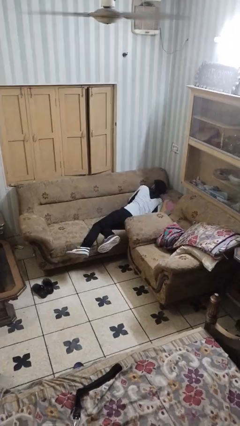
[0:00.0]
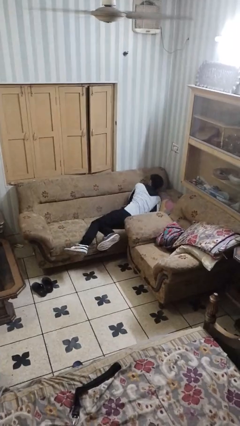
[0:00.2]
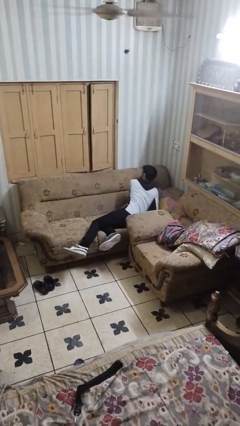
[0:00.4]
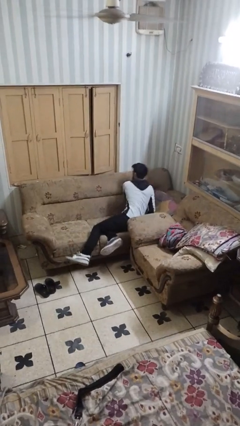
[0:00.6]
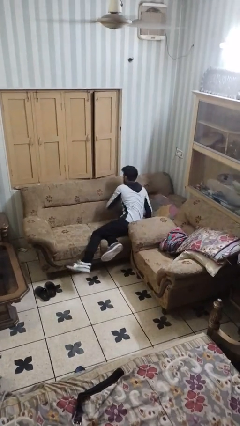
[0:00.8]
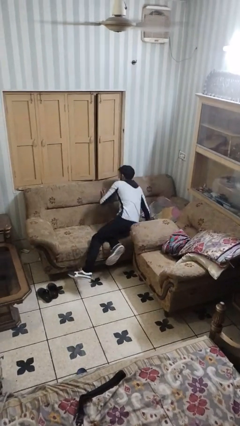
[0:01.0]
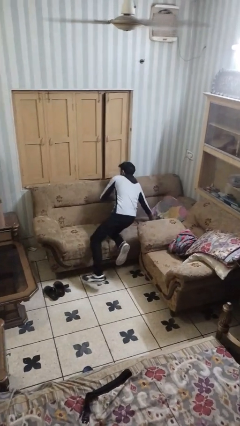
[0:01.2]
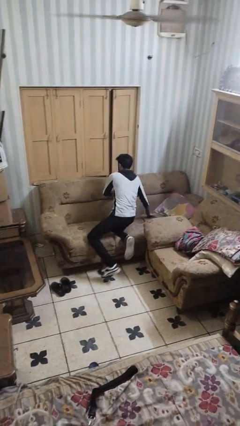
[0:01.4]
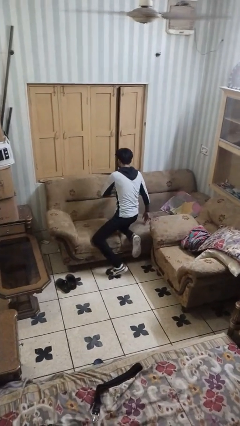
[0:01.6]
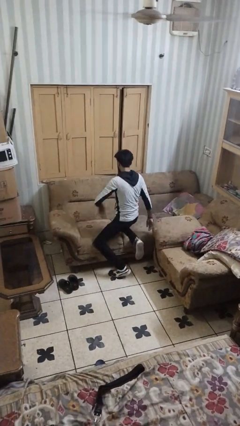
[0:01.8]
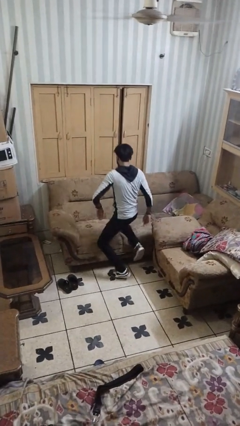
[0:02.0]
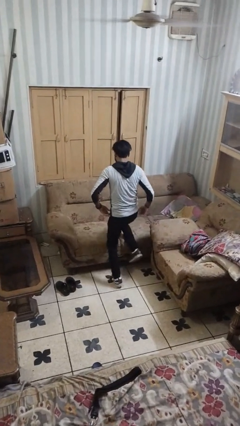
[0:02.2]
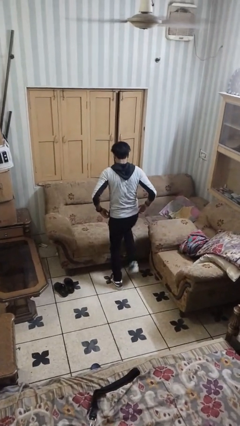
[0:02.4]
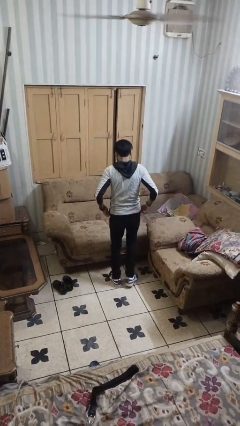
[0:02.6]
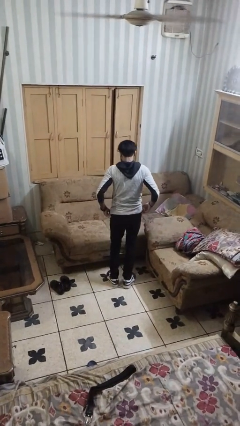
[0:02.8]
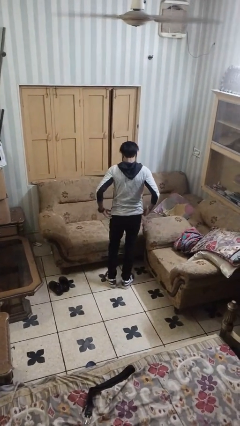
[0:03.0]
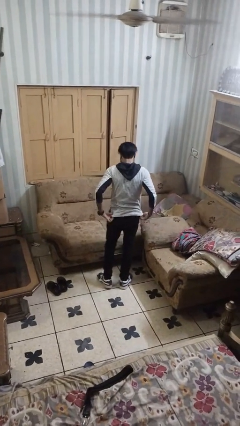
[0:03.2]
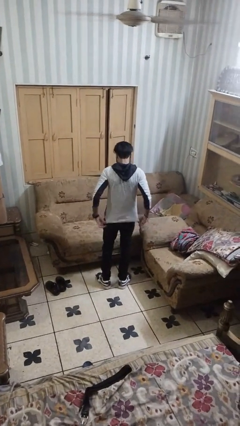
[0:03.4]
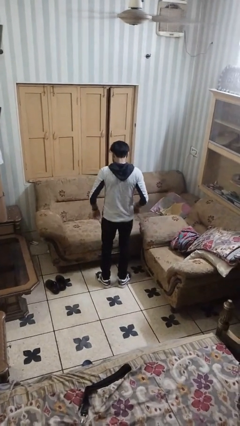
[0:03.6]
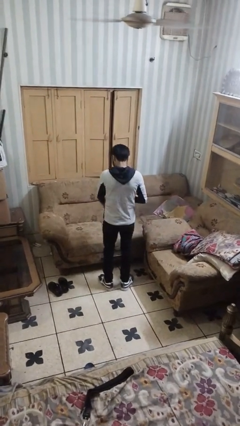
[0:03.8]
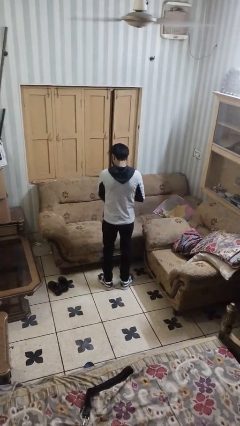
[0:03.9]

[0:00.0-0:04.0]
person stands up

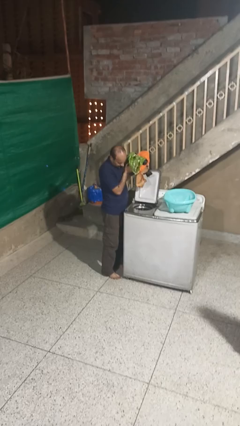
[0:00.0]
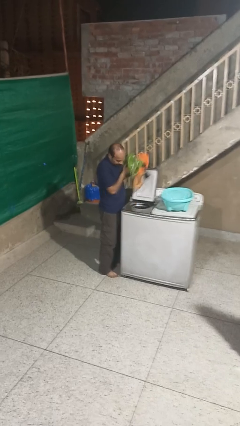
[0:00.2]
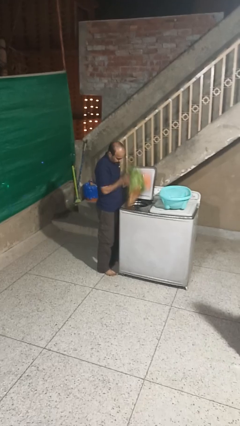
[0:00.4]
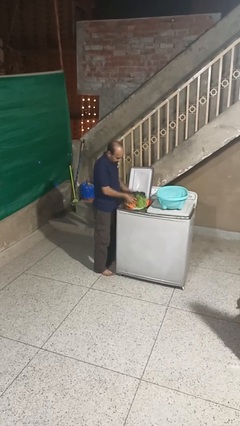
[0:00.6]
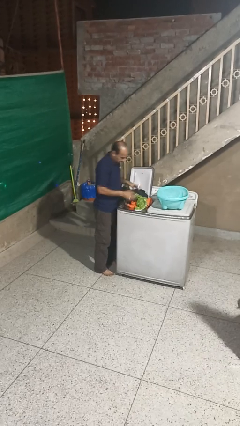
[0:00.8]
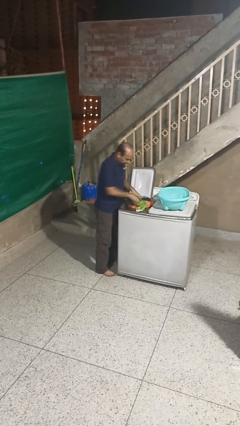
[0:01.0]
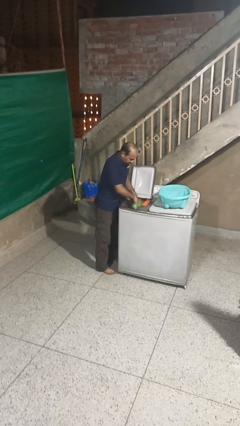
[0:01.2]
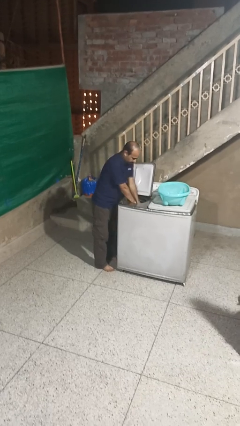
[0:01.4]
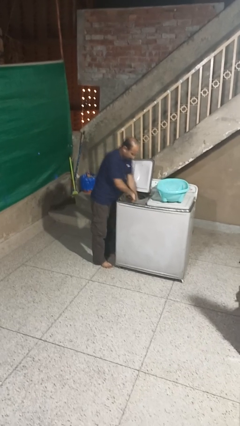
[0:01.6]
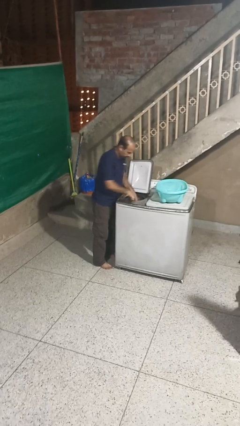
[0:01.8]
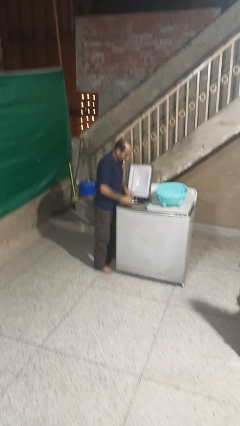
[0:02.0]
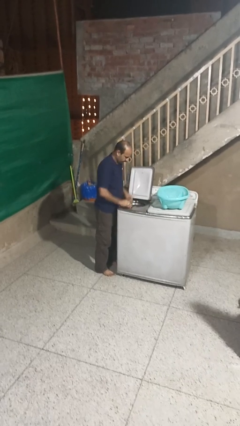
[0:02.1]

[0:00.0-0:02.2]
person loads dryer

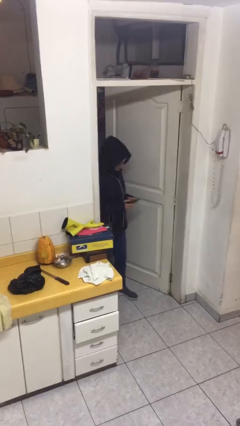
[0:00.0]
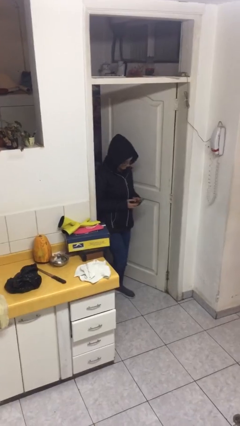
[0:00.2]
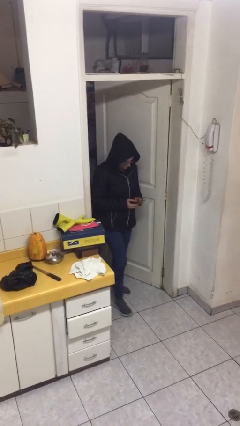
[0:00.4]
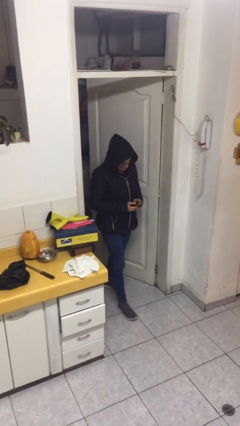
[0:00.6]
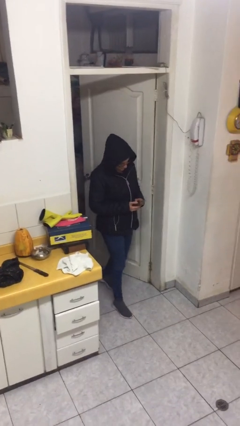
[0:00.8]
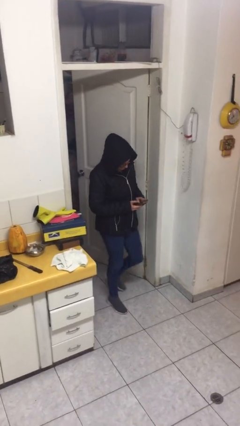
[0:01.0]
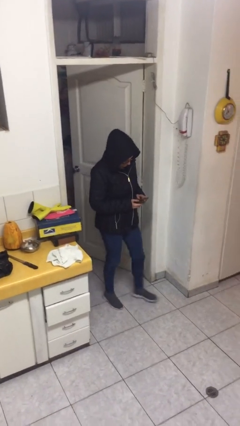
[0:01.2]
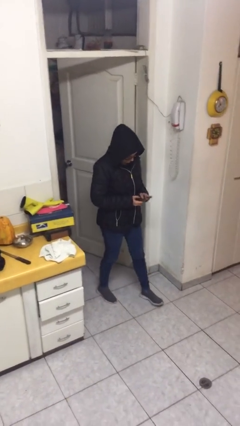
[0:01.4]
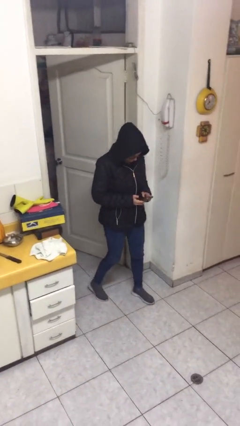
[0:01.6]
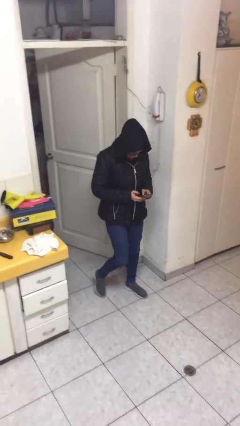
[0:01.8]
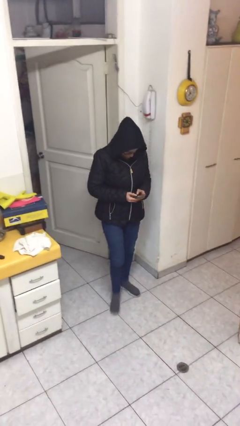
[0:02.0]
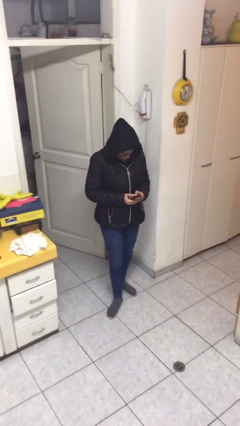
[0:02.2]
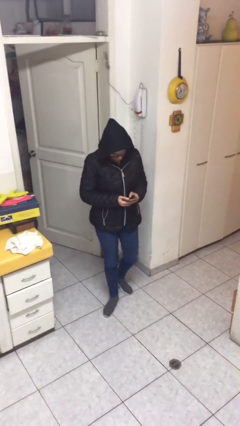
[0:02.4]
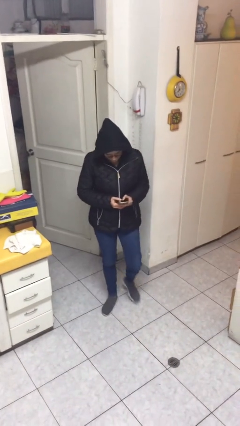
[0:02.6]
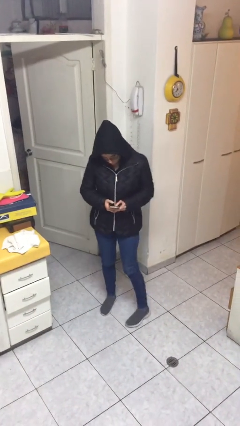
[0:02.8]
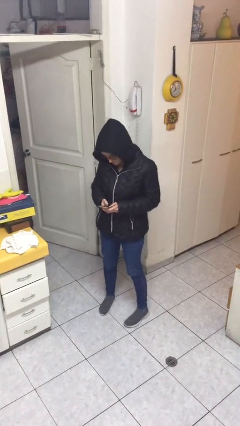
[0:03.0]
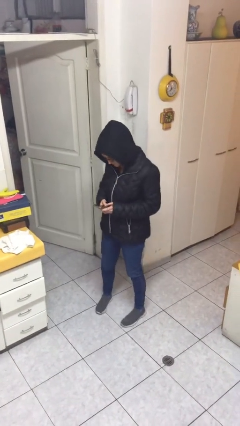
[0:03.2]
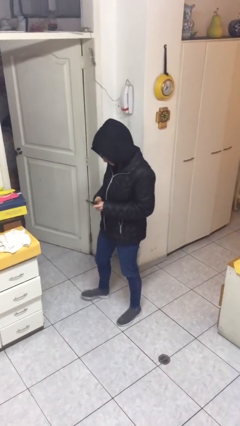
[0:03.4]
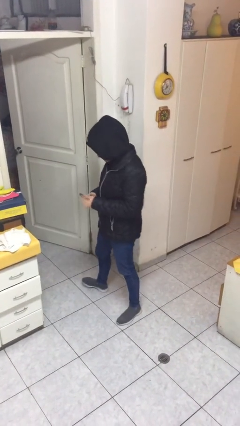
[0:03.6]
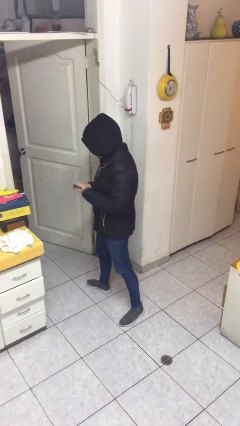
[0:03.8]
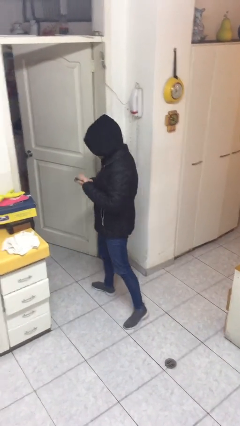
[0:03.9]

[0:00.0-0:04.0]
person enters scene through structure

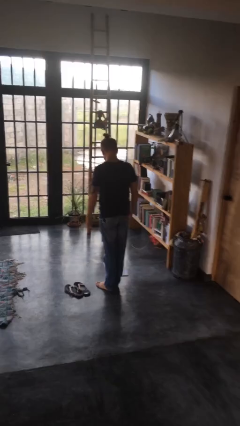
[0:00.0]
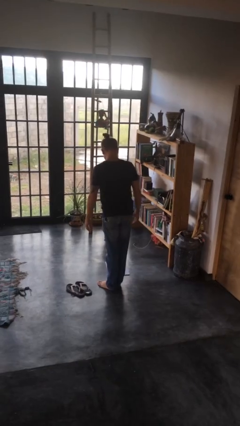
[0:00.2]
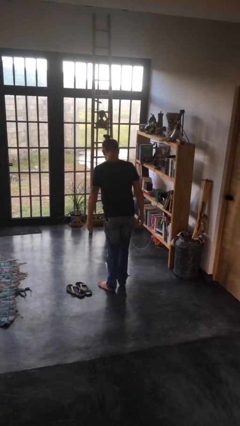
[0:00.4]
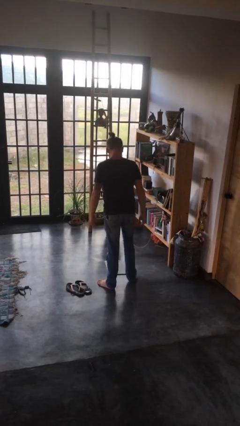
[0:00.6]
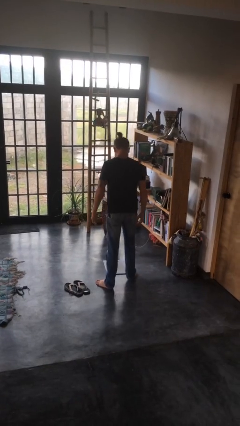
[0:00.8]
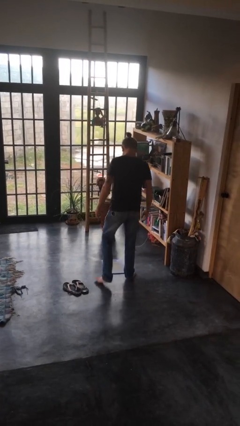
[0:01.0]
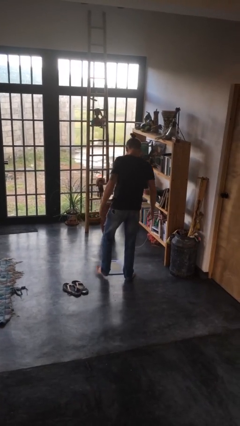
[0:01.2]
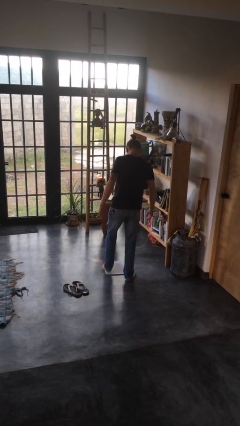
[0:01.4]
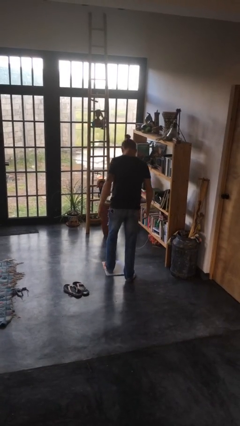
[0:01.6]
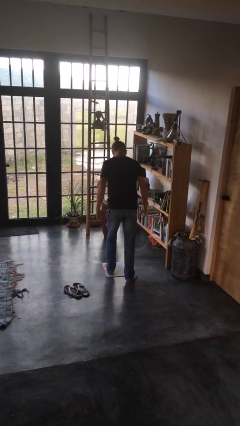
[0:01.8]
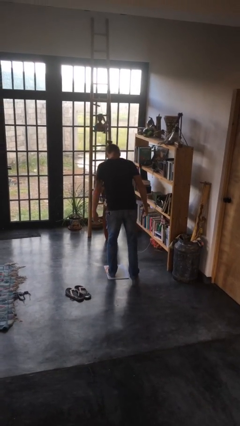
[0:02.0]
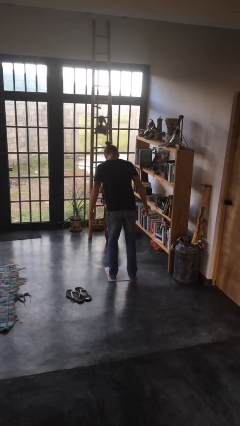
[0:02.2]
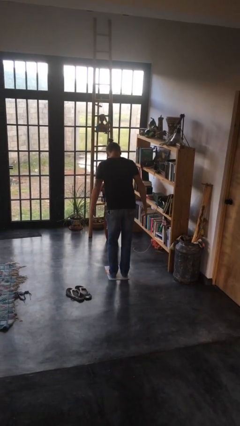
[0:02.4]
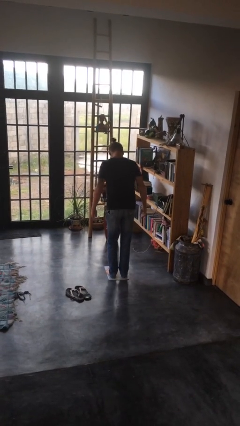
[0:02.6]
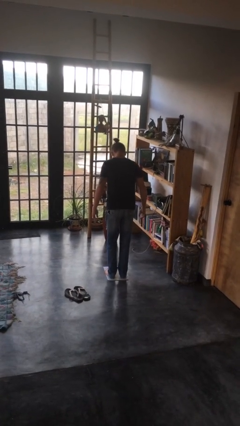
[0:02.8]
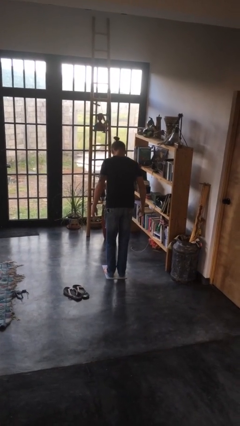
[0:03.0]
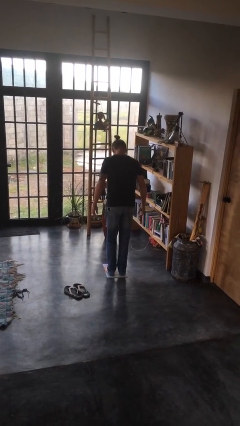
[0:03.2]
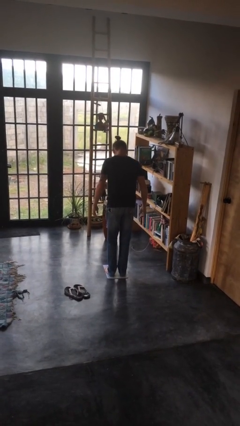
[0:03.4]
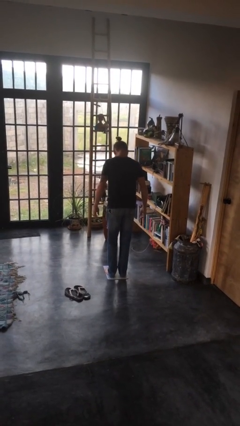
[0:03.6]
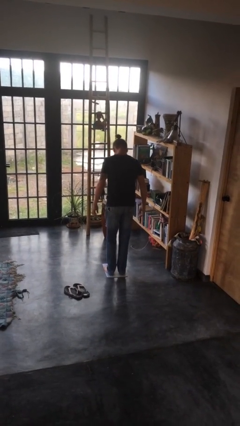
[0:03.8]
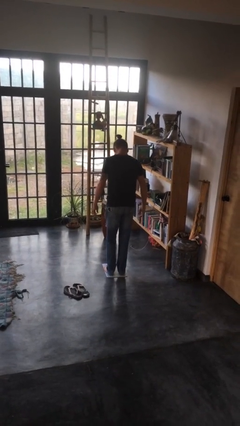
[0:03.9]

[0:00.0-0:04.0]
person uses bodyweight scale

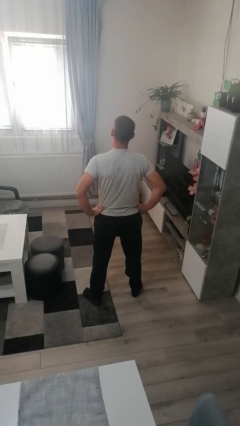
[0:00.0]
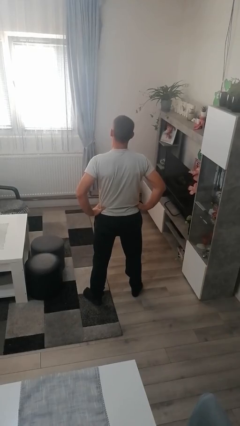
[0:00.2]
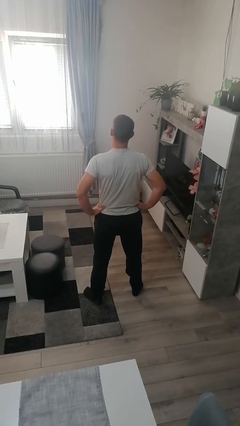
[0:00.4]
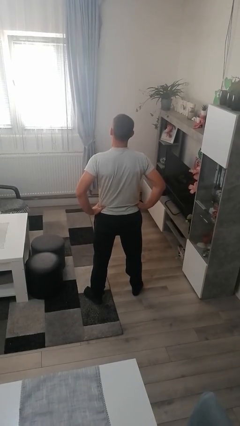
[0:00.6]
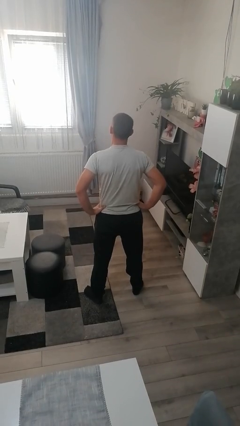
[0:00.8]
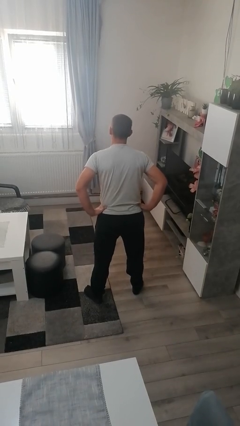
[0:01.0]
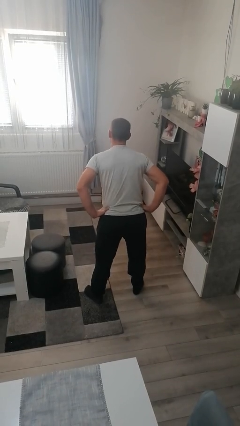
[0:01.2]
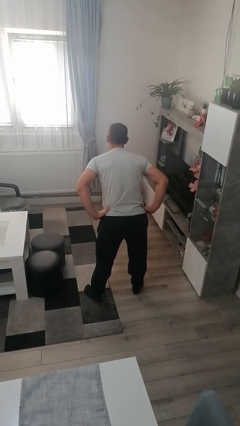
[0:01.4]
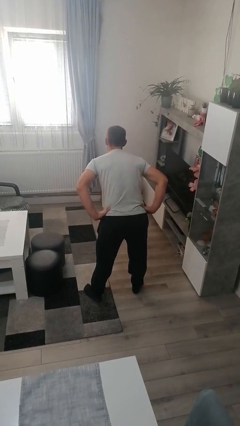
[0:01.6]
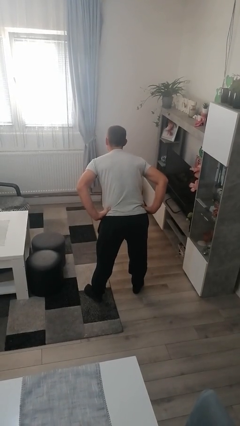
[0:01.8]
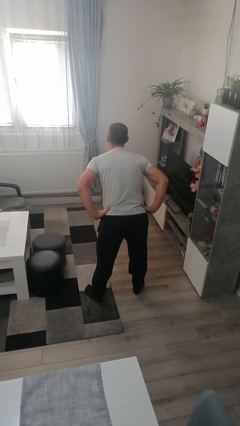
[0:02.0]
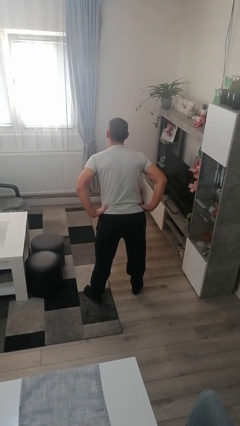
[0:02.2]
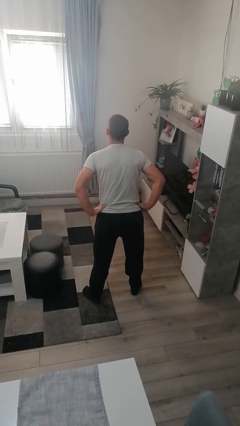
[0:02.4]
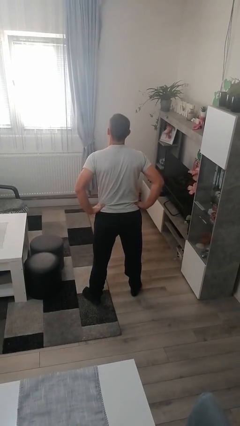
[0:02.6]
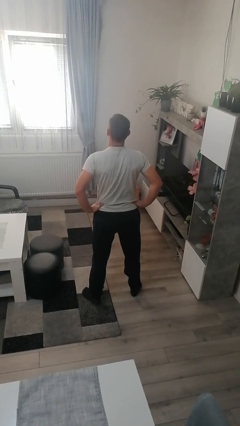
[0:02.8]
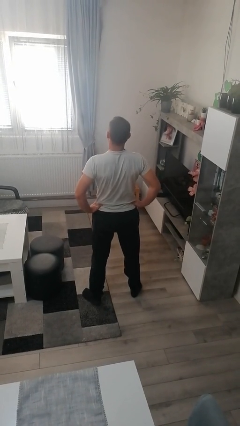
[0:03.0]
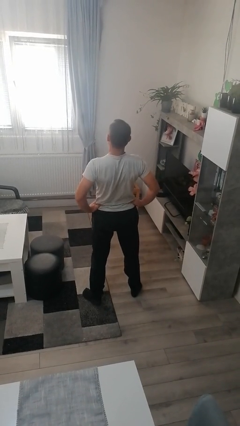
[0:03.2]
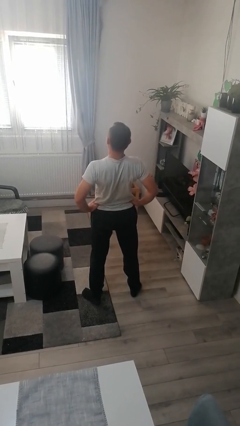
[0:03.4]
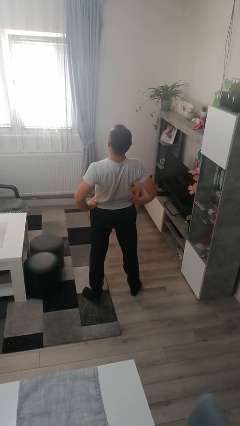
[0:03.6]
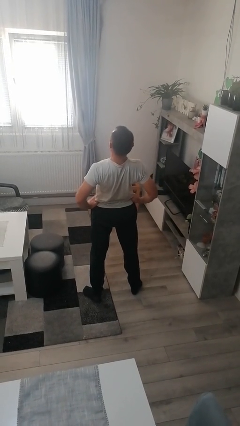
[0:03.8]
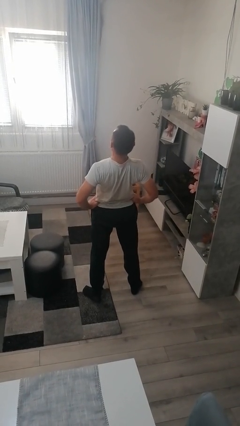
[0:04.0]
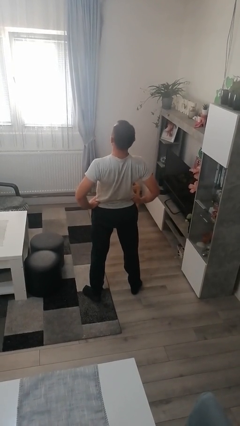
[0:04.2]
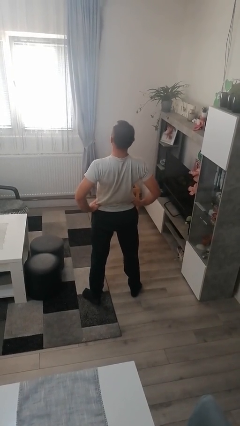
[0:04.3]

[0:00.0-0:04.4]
person wiggles hips
